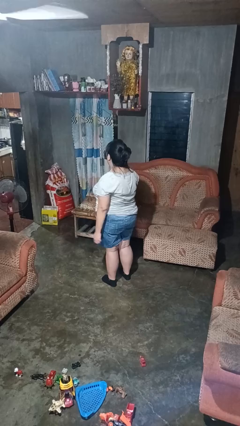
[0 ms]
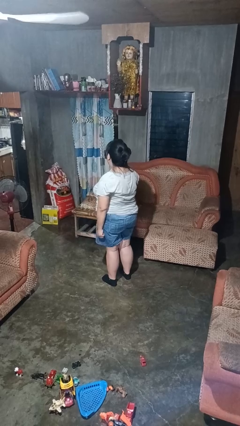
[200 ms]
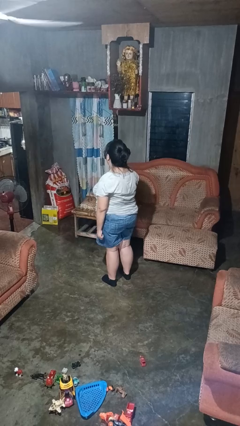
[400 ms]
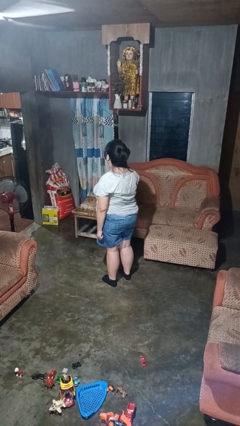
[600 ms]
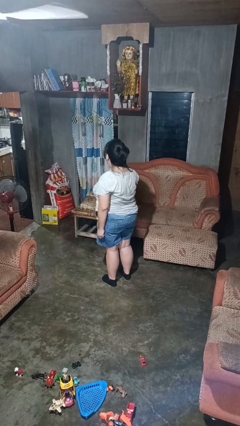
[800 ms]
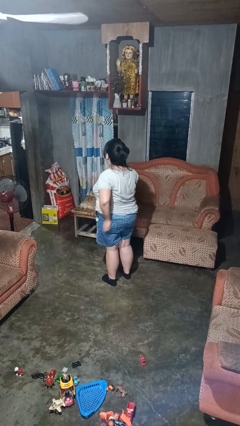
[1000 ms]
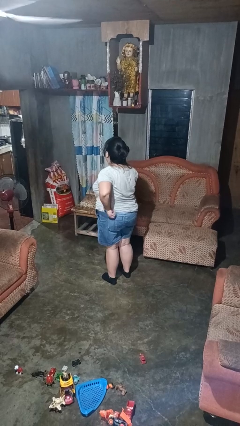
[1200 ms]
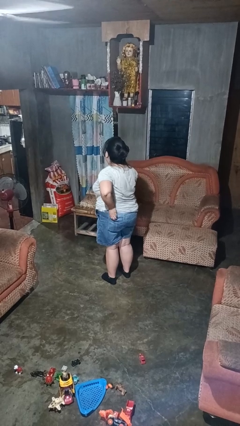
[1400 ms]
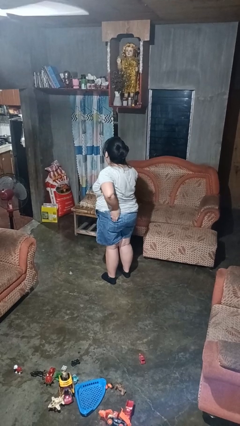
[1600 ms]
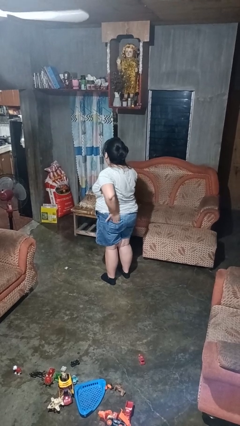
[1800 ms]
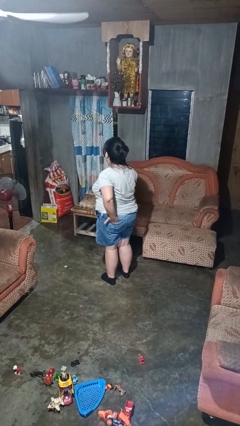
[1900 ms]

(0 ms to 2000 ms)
person puts hands in back pockets

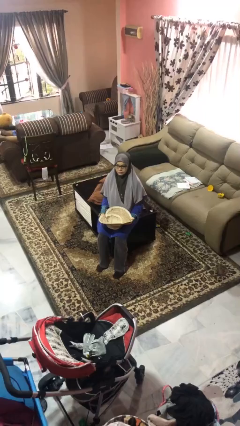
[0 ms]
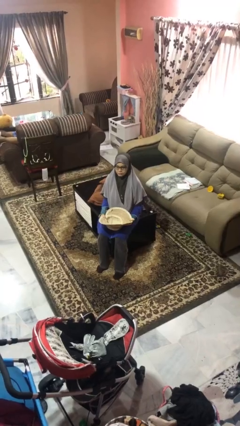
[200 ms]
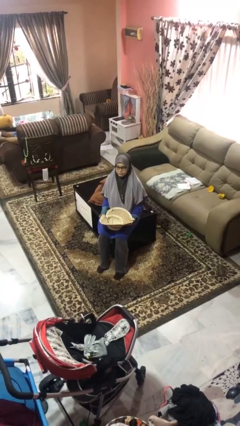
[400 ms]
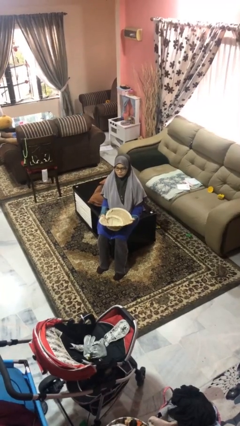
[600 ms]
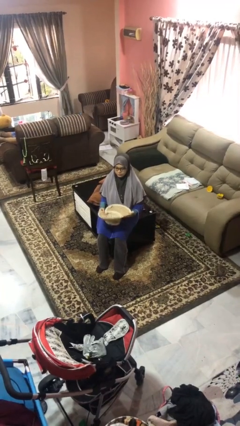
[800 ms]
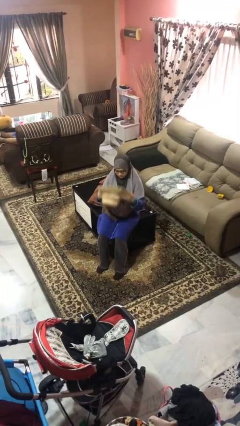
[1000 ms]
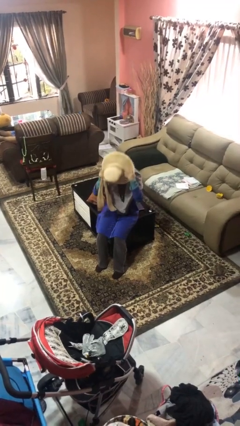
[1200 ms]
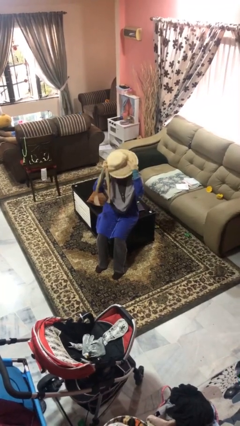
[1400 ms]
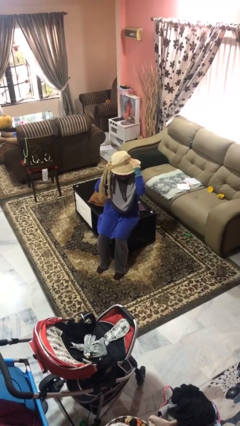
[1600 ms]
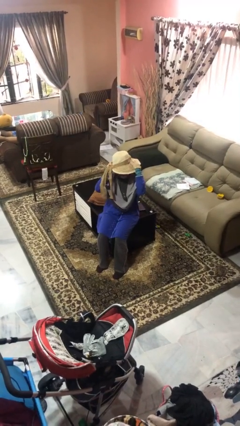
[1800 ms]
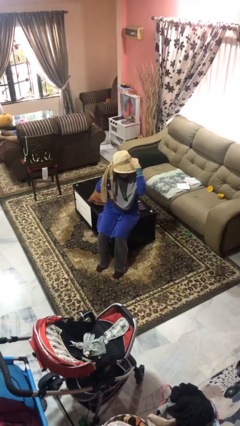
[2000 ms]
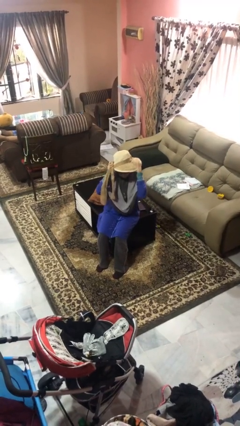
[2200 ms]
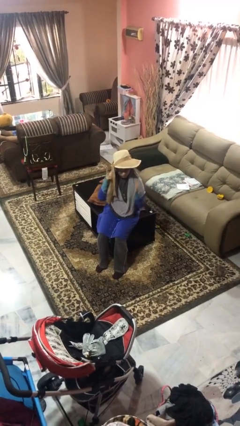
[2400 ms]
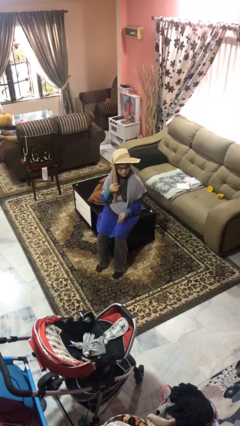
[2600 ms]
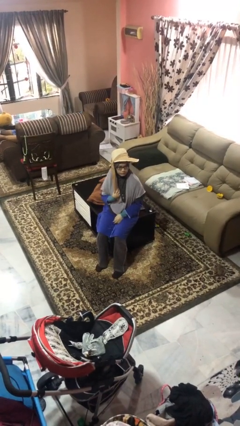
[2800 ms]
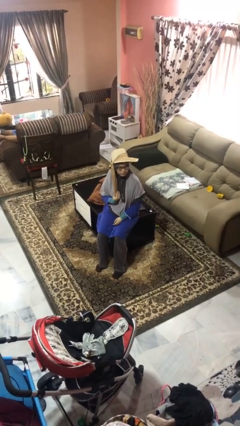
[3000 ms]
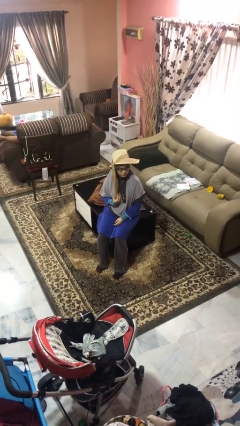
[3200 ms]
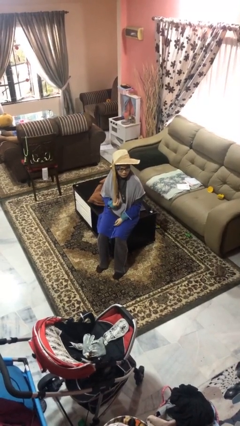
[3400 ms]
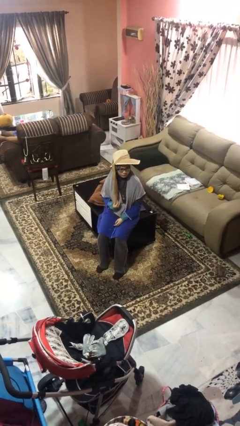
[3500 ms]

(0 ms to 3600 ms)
person puts on hat

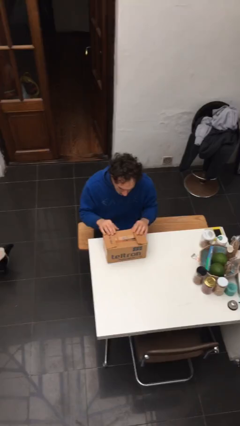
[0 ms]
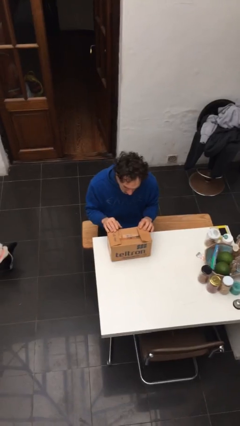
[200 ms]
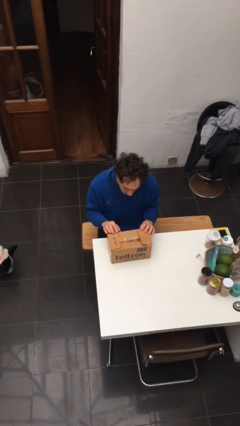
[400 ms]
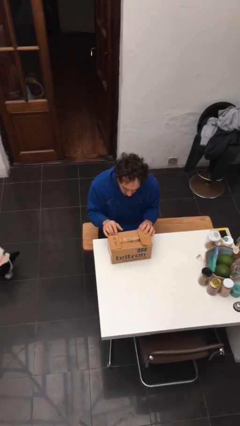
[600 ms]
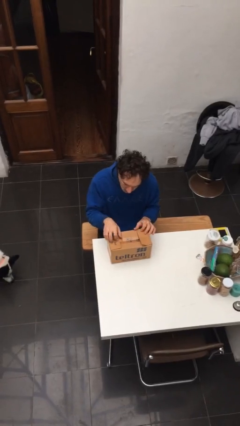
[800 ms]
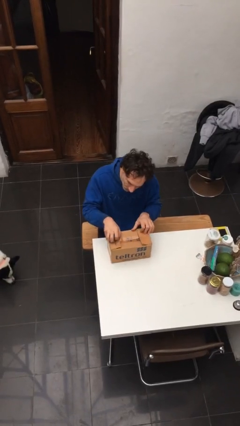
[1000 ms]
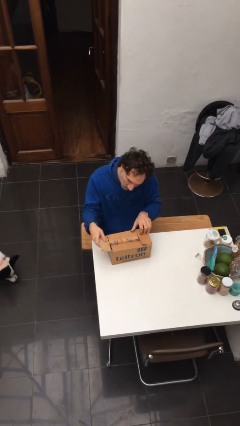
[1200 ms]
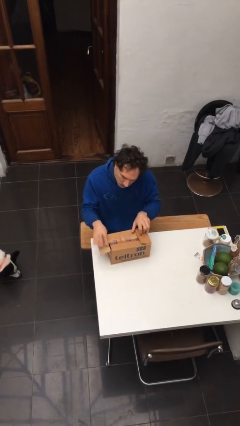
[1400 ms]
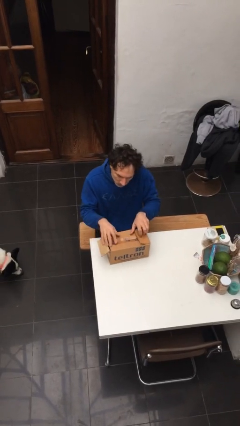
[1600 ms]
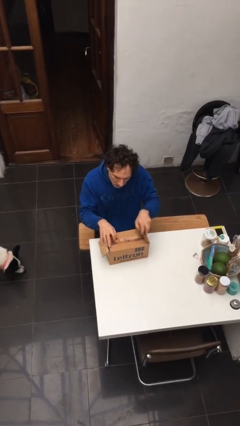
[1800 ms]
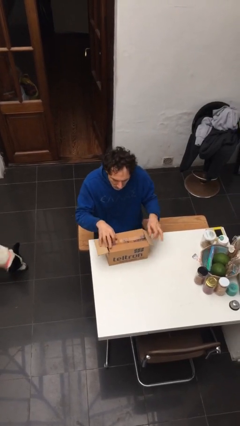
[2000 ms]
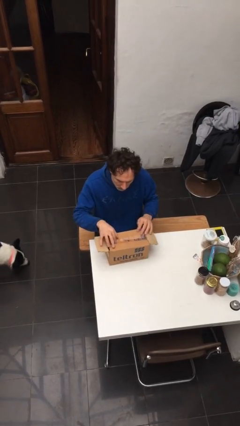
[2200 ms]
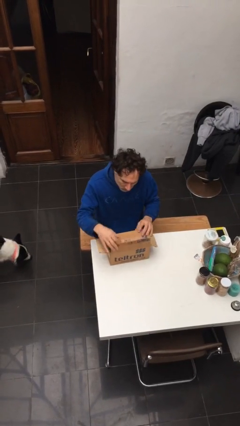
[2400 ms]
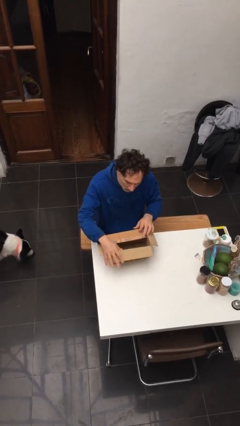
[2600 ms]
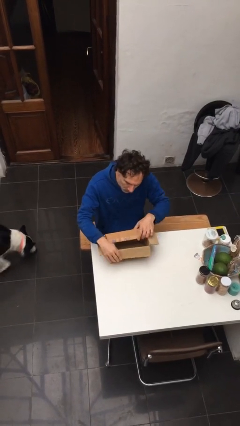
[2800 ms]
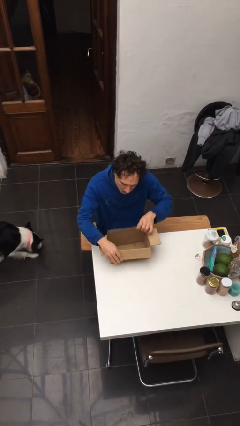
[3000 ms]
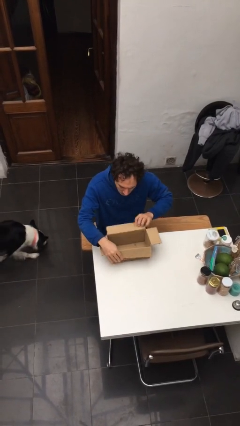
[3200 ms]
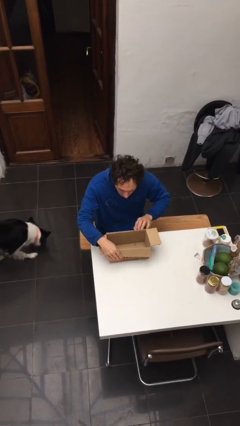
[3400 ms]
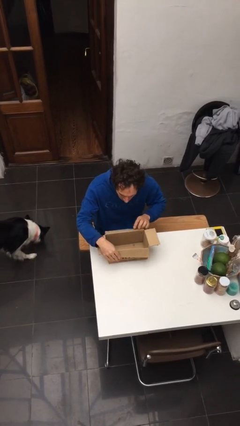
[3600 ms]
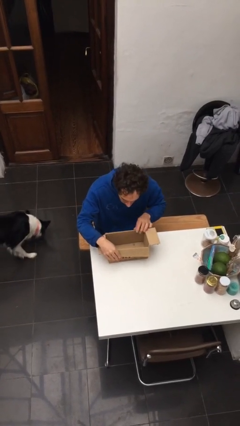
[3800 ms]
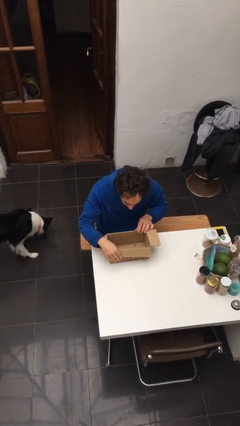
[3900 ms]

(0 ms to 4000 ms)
person opens box

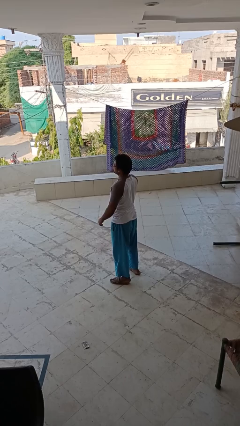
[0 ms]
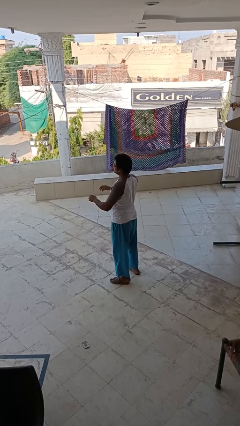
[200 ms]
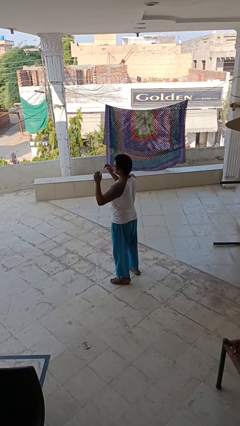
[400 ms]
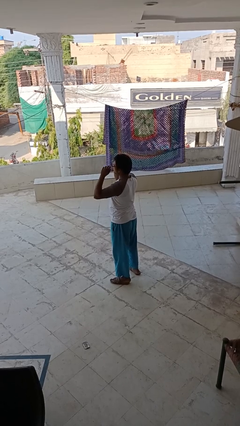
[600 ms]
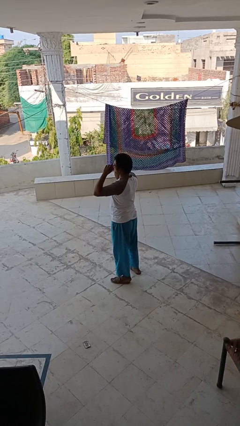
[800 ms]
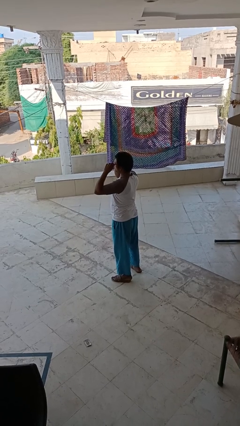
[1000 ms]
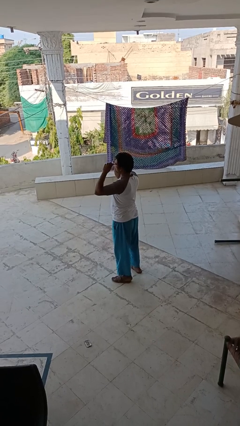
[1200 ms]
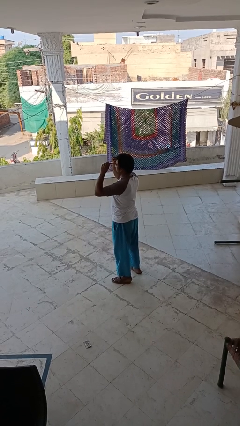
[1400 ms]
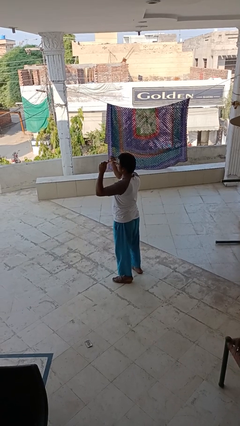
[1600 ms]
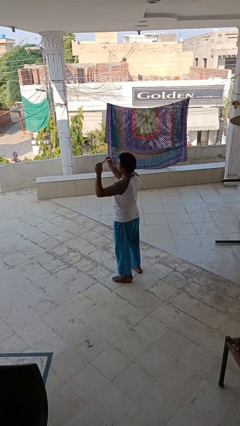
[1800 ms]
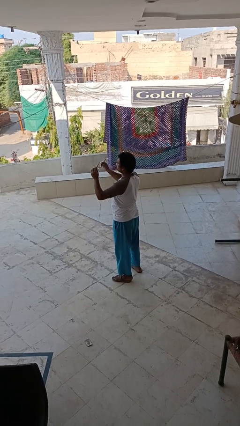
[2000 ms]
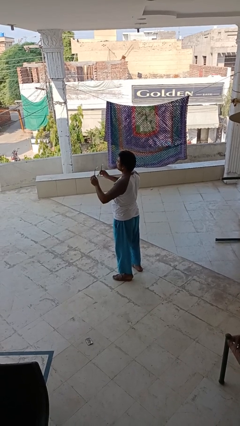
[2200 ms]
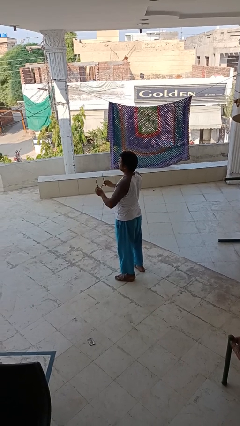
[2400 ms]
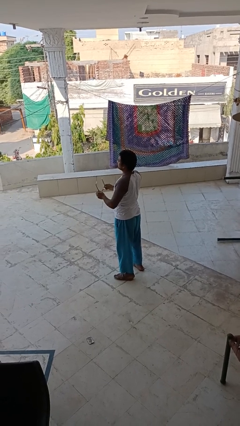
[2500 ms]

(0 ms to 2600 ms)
person takes off glasses

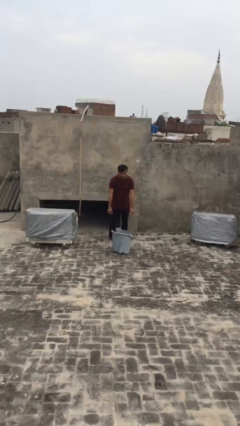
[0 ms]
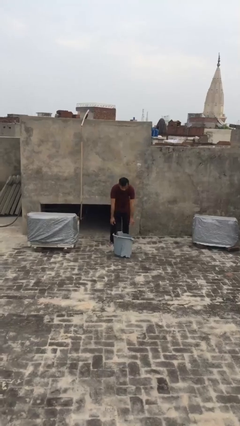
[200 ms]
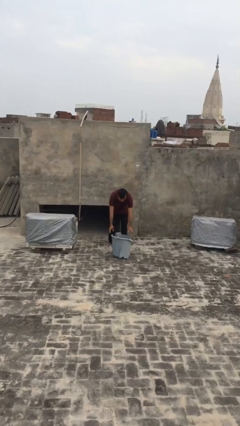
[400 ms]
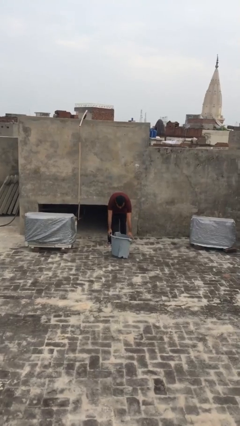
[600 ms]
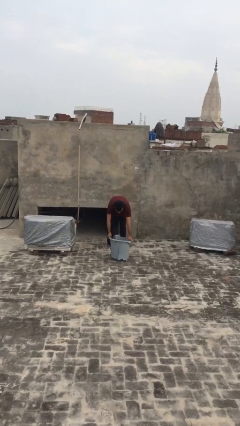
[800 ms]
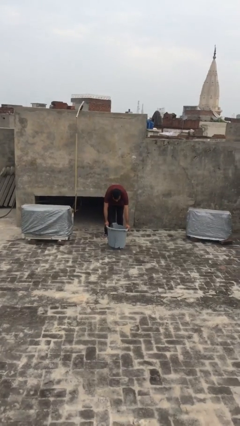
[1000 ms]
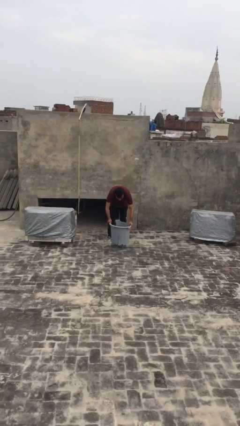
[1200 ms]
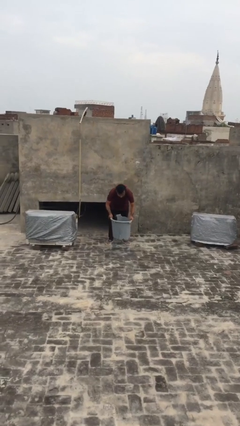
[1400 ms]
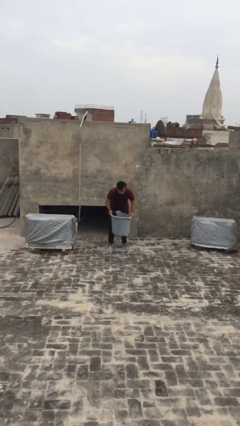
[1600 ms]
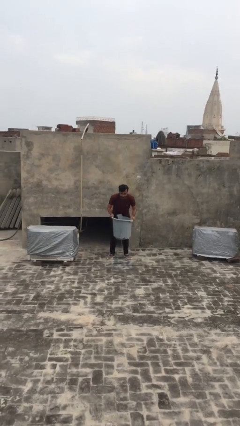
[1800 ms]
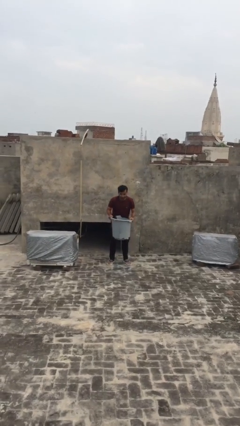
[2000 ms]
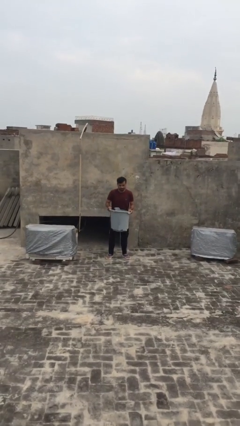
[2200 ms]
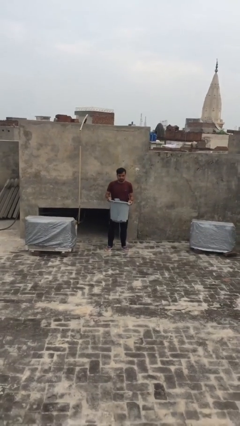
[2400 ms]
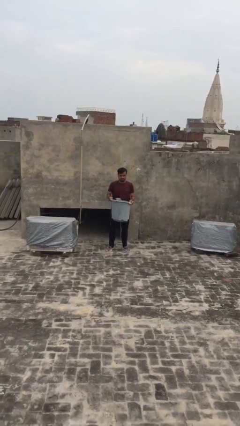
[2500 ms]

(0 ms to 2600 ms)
person picks up object from floor

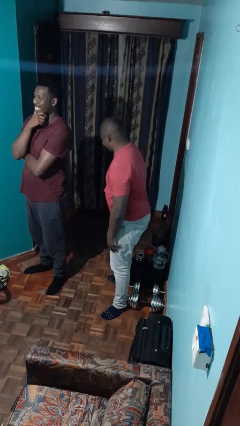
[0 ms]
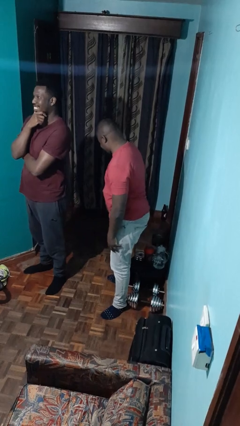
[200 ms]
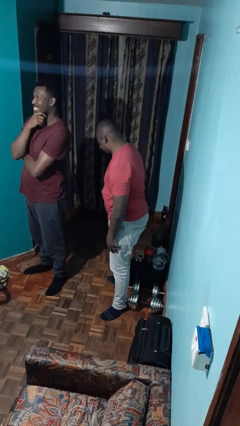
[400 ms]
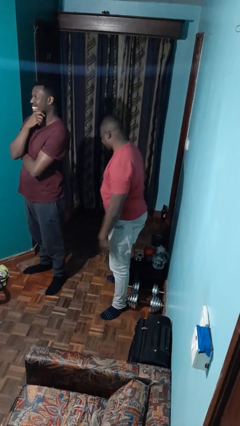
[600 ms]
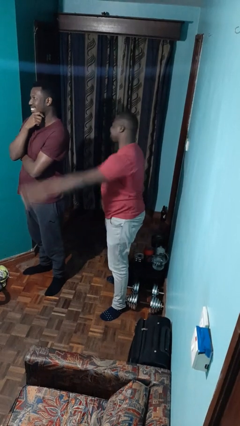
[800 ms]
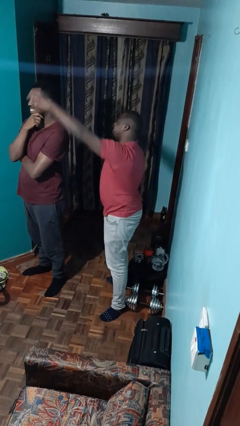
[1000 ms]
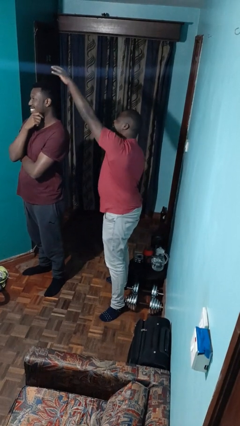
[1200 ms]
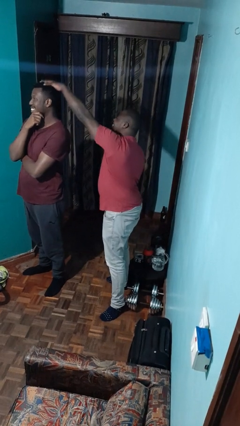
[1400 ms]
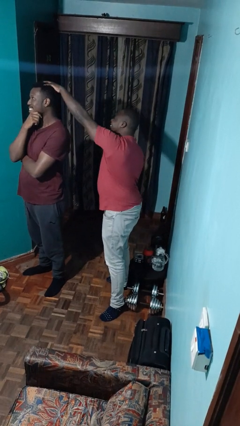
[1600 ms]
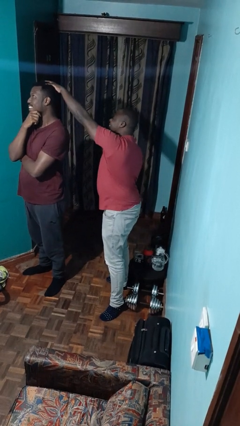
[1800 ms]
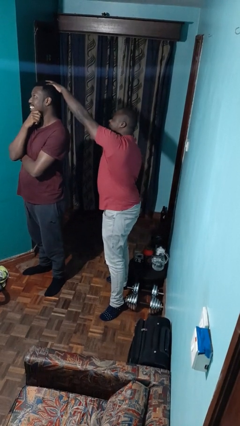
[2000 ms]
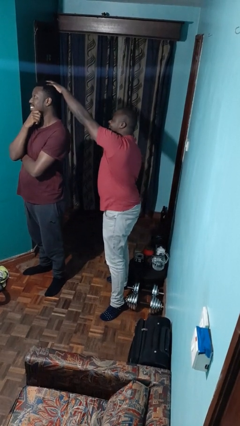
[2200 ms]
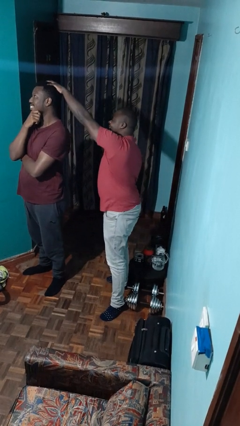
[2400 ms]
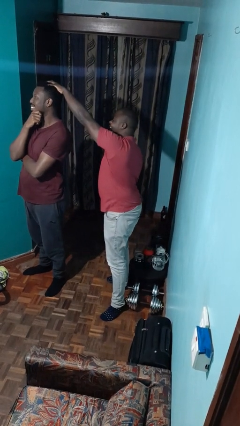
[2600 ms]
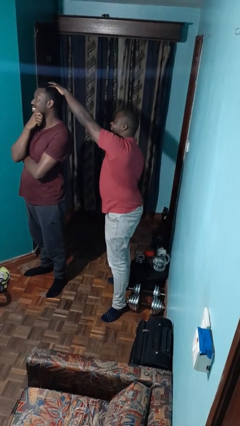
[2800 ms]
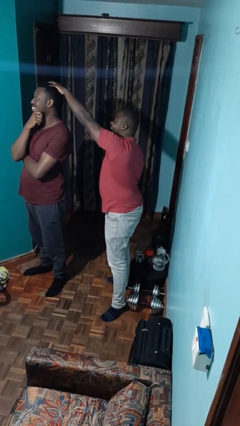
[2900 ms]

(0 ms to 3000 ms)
person grabs person by hair
